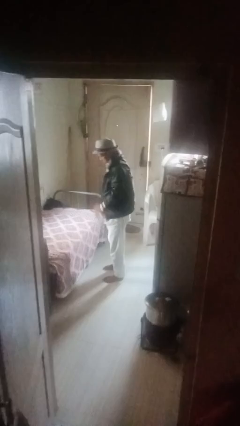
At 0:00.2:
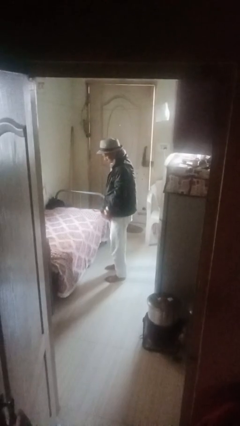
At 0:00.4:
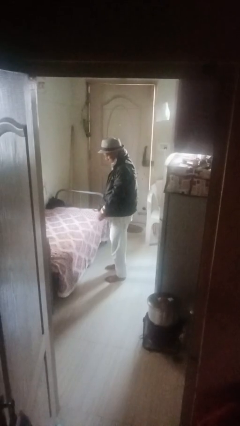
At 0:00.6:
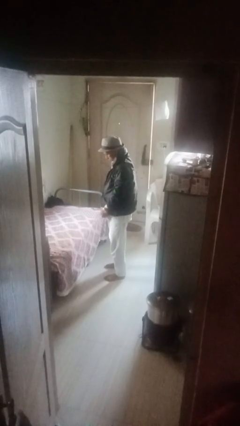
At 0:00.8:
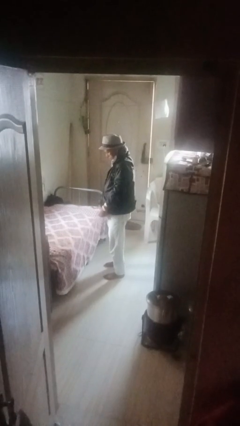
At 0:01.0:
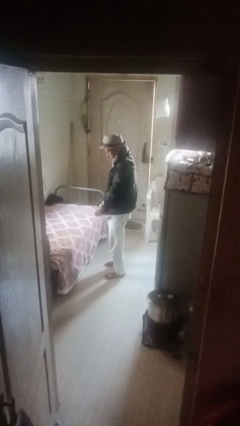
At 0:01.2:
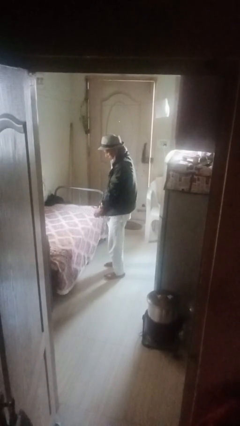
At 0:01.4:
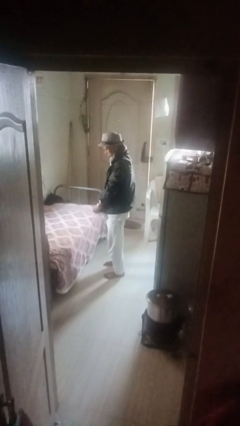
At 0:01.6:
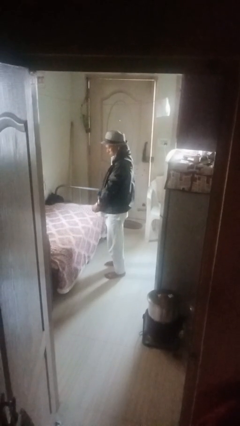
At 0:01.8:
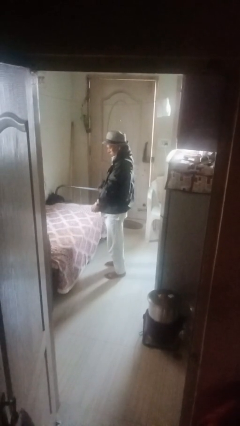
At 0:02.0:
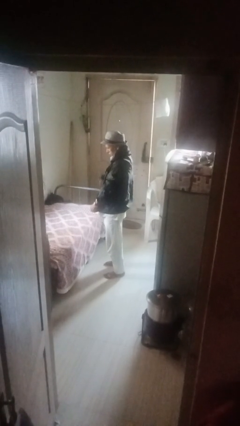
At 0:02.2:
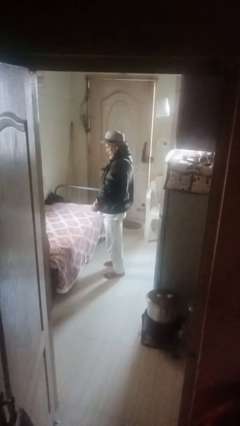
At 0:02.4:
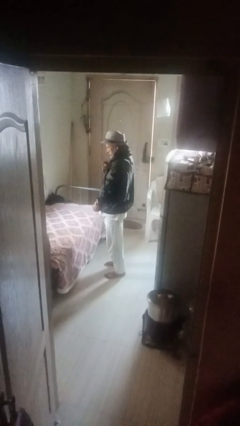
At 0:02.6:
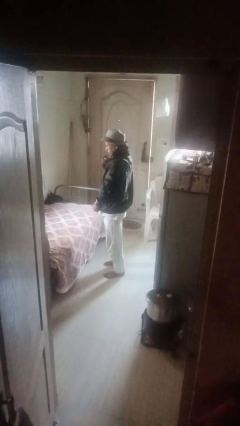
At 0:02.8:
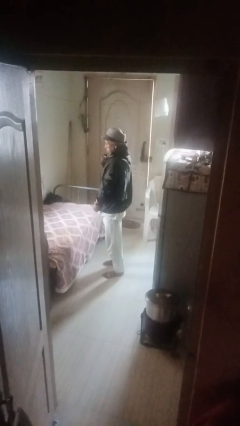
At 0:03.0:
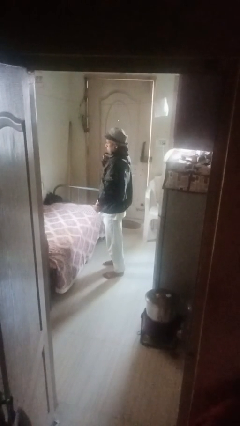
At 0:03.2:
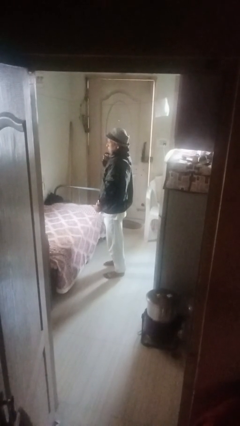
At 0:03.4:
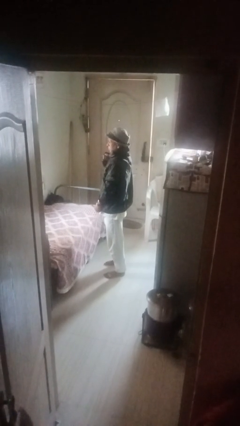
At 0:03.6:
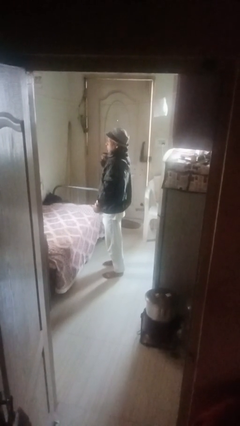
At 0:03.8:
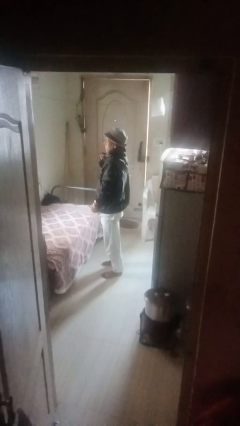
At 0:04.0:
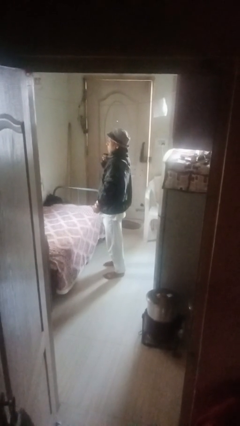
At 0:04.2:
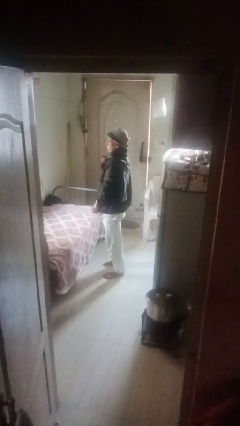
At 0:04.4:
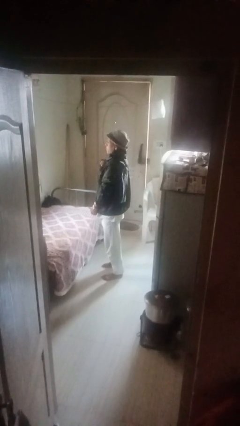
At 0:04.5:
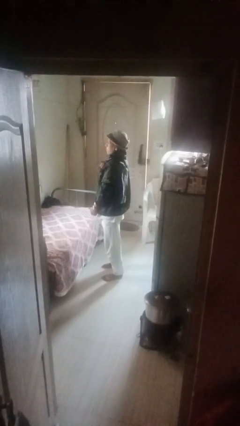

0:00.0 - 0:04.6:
person zips up jacket

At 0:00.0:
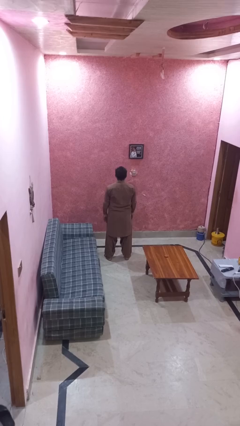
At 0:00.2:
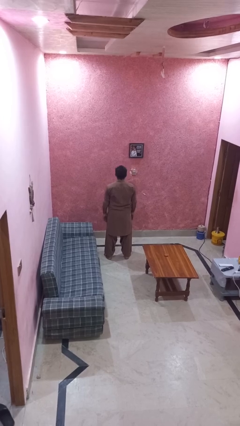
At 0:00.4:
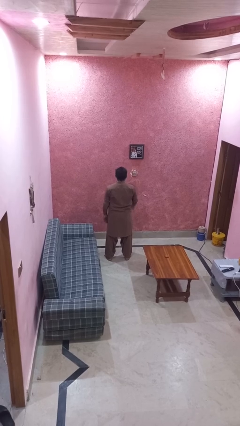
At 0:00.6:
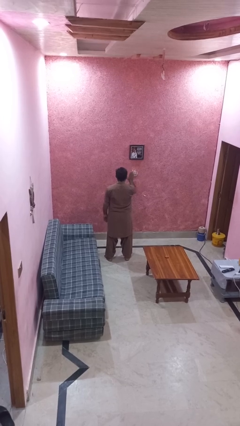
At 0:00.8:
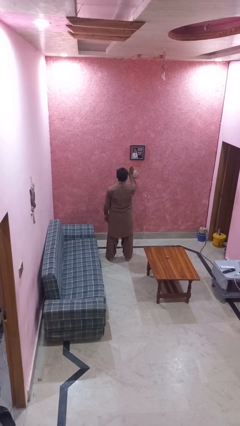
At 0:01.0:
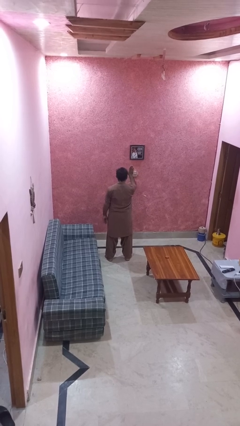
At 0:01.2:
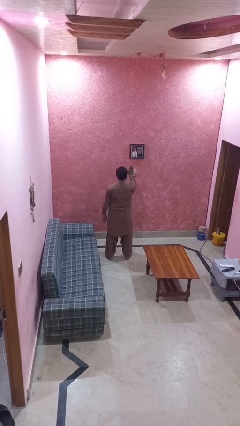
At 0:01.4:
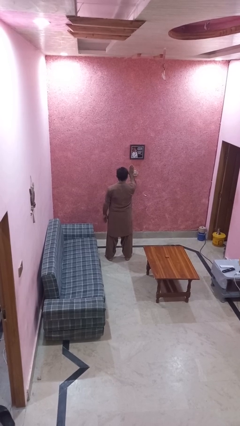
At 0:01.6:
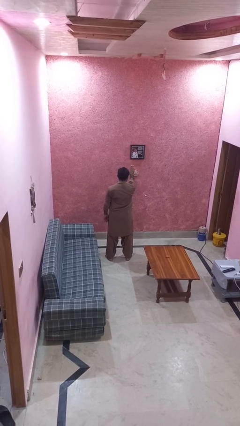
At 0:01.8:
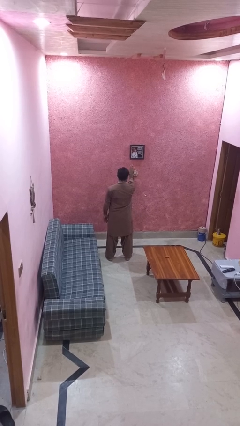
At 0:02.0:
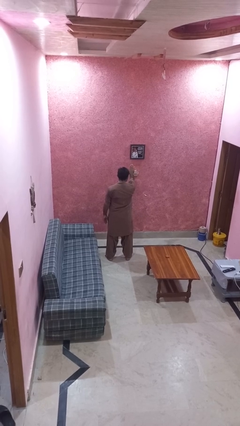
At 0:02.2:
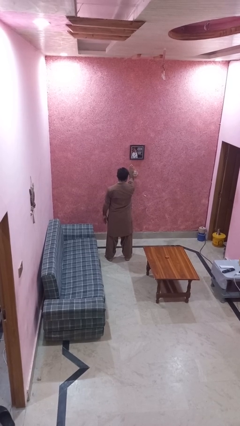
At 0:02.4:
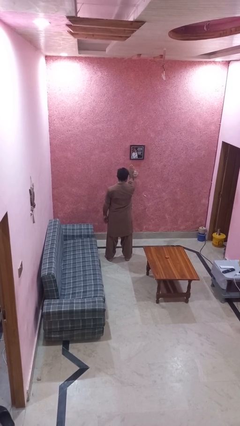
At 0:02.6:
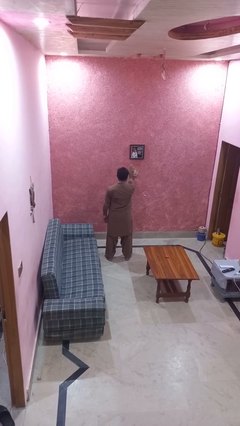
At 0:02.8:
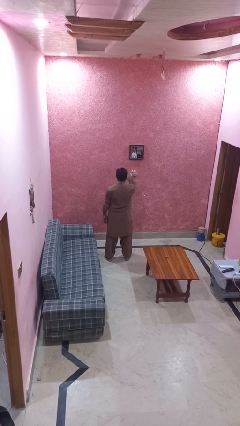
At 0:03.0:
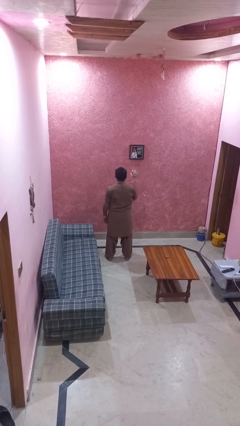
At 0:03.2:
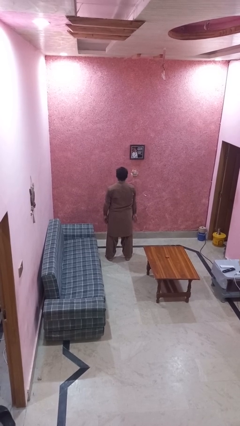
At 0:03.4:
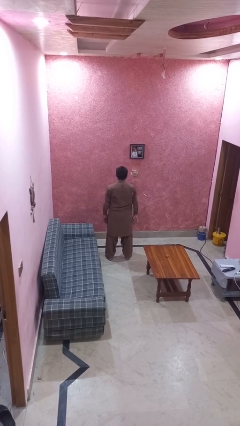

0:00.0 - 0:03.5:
person gestures stop

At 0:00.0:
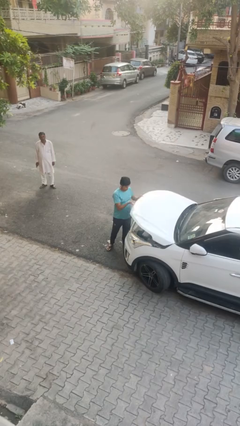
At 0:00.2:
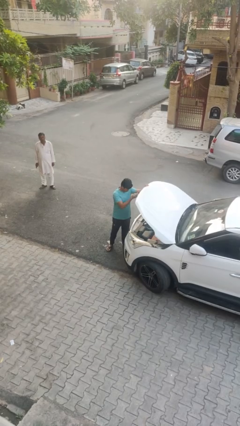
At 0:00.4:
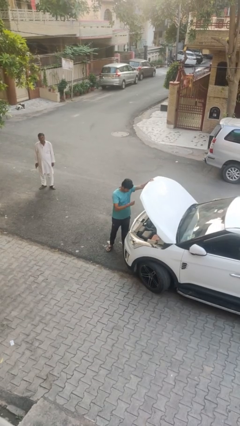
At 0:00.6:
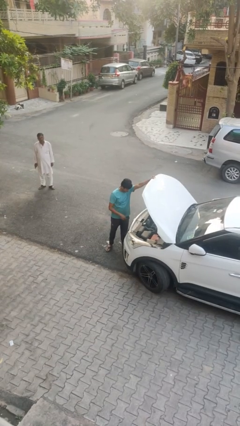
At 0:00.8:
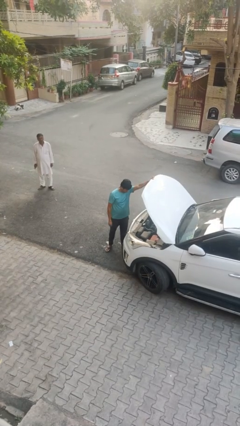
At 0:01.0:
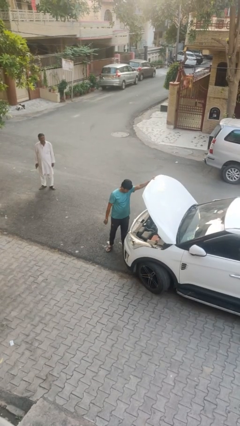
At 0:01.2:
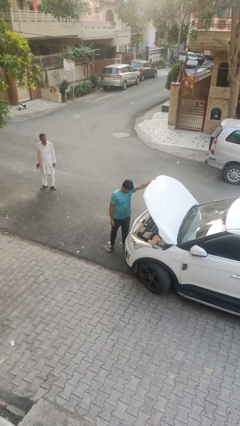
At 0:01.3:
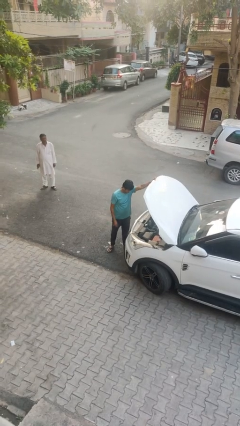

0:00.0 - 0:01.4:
person opens car hood

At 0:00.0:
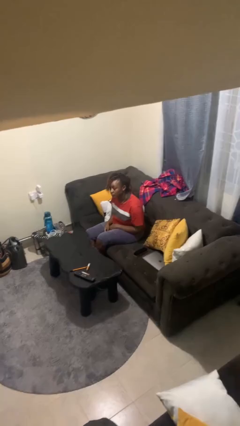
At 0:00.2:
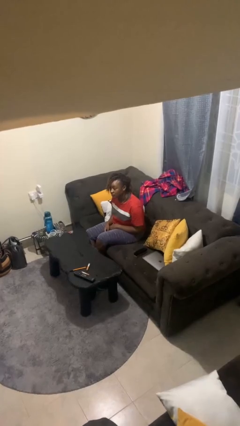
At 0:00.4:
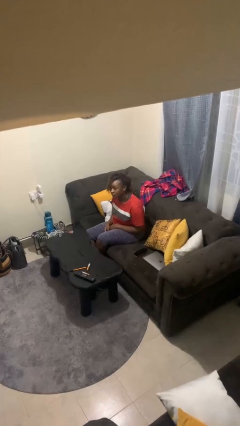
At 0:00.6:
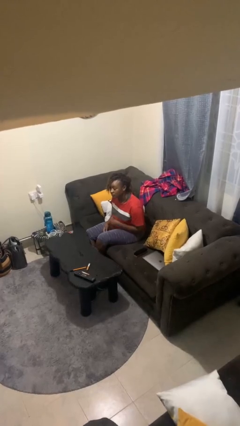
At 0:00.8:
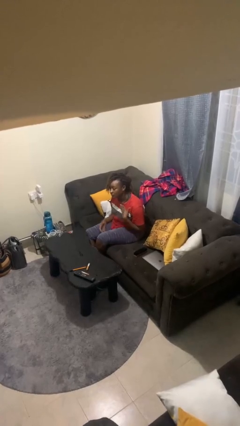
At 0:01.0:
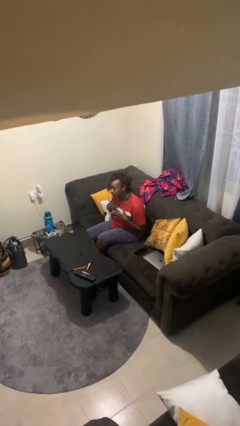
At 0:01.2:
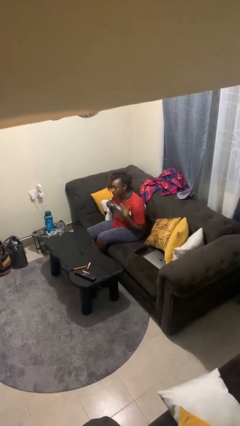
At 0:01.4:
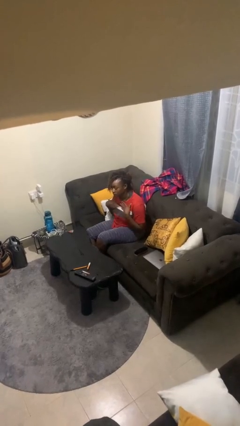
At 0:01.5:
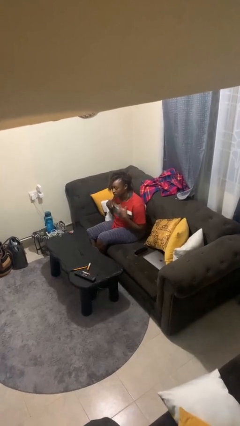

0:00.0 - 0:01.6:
person drums on chest

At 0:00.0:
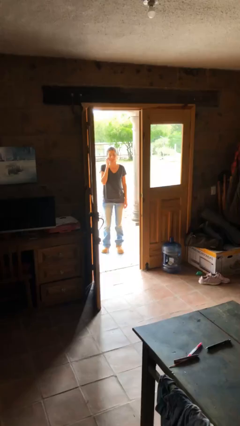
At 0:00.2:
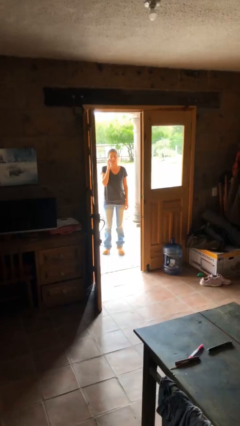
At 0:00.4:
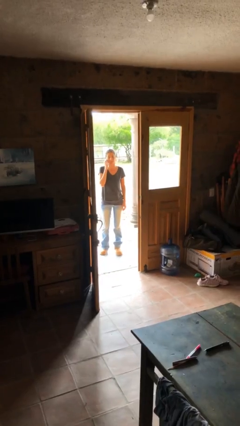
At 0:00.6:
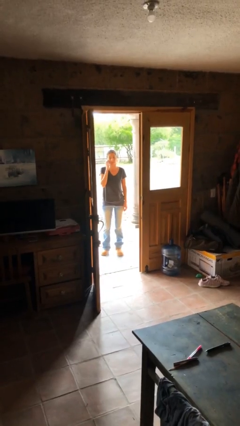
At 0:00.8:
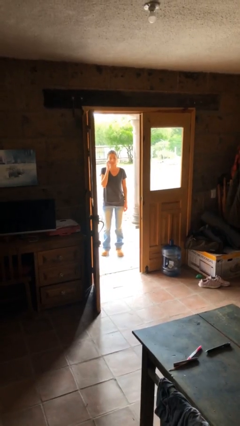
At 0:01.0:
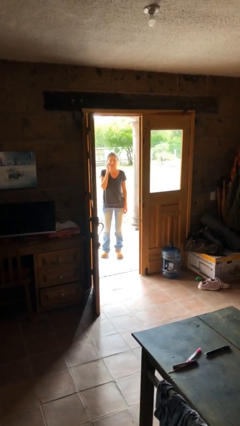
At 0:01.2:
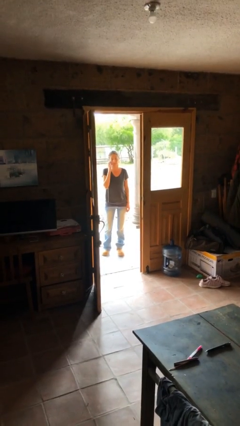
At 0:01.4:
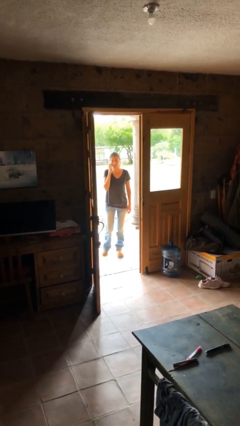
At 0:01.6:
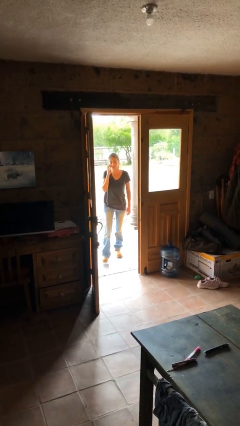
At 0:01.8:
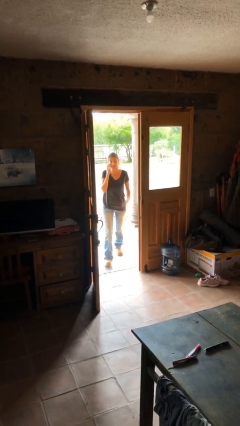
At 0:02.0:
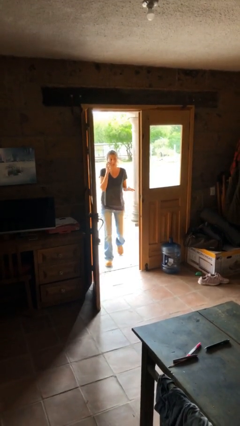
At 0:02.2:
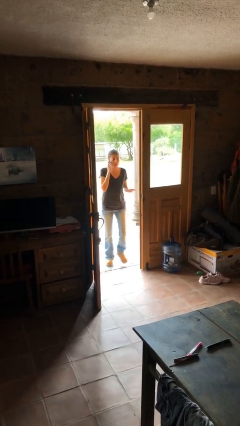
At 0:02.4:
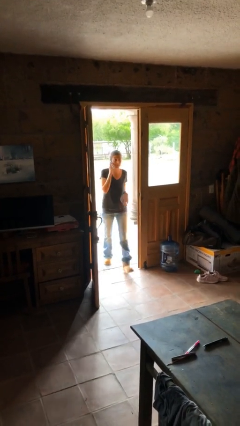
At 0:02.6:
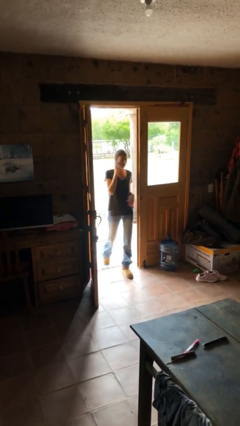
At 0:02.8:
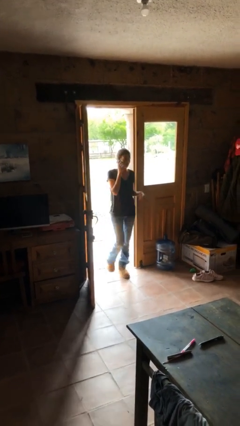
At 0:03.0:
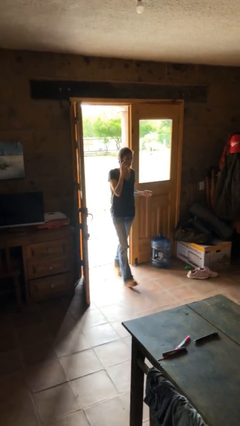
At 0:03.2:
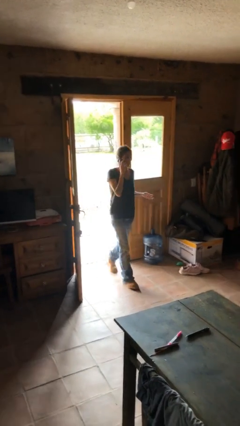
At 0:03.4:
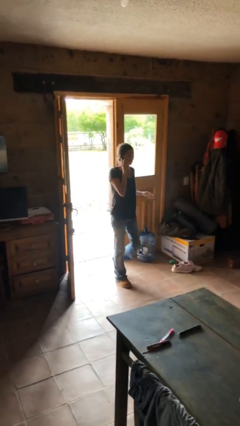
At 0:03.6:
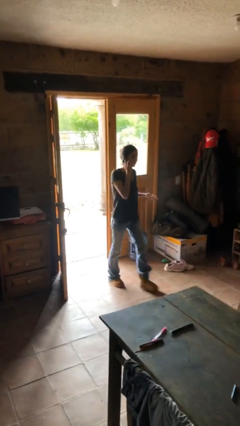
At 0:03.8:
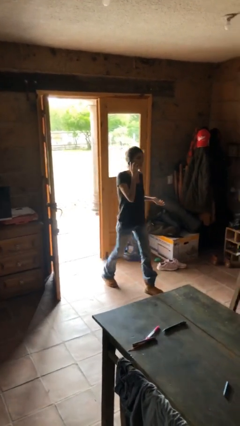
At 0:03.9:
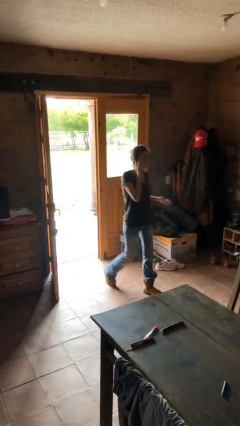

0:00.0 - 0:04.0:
person enters scene through structure

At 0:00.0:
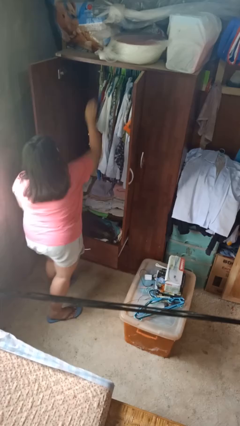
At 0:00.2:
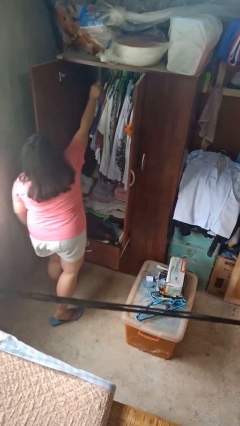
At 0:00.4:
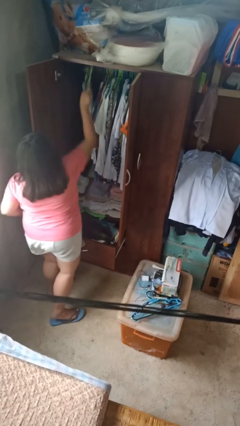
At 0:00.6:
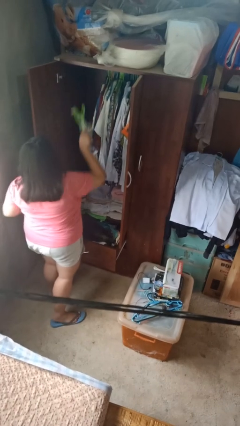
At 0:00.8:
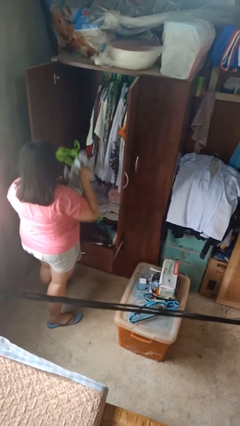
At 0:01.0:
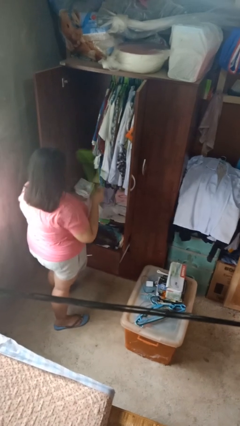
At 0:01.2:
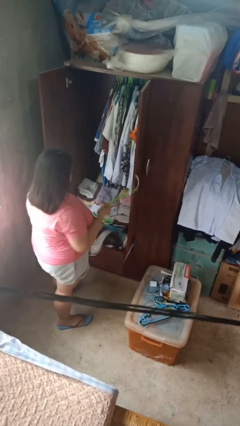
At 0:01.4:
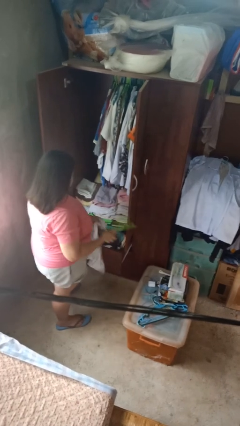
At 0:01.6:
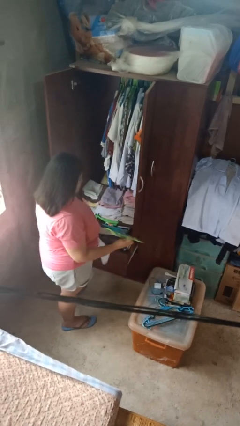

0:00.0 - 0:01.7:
person takes clothes from closet

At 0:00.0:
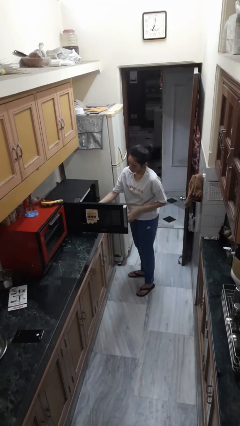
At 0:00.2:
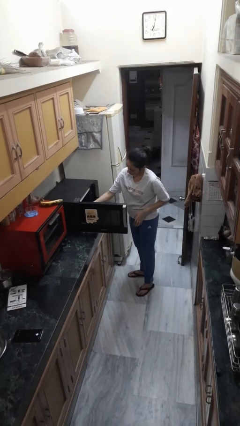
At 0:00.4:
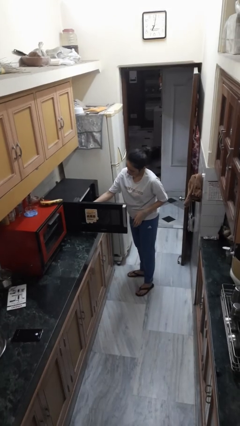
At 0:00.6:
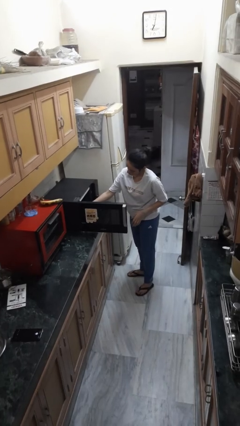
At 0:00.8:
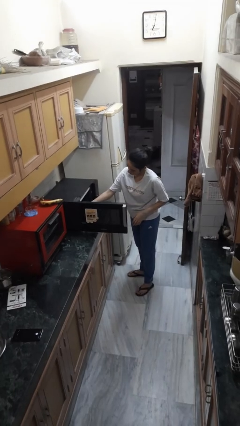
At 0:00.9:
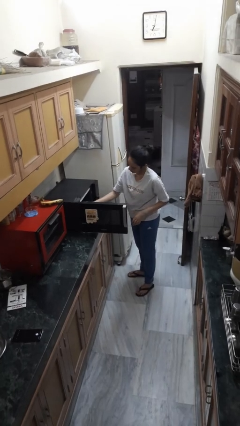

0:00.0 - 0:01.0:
person puts object into microwave
